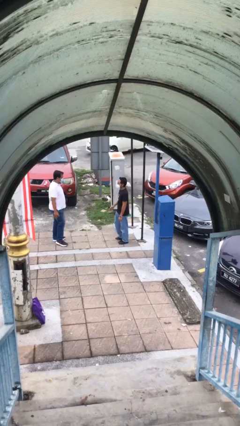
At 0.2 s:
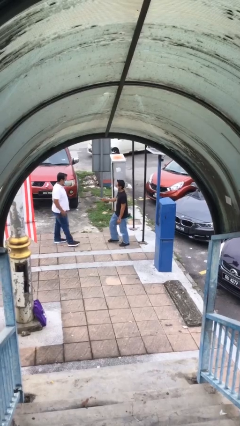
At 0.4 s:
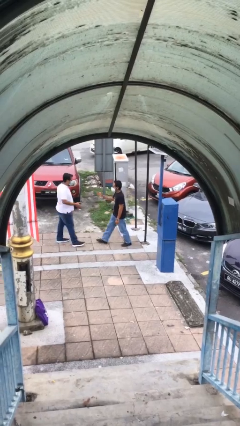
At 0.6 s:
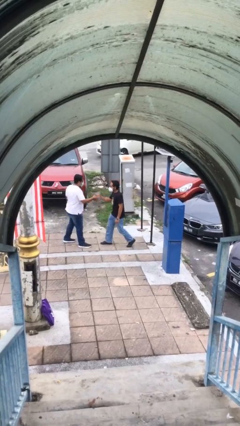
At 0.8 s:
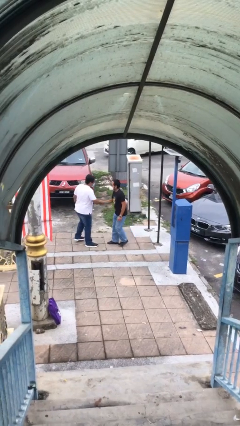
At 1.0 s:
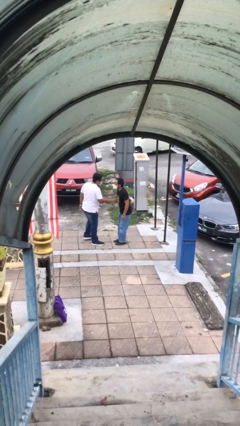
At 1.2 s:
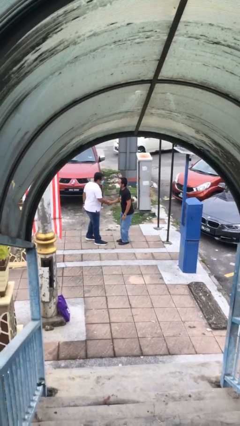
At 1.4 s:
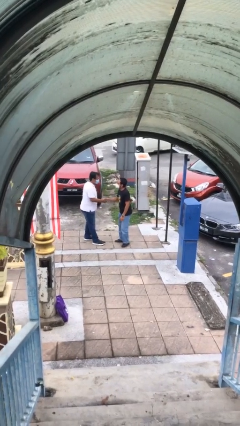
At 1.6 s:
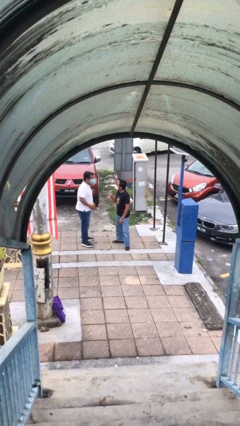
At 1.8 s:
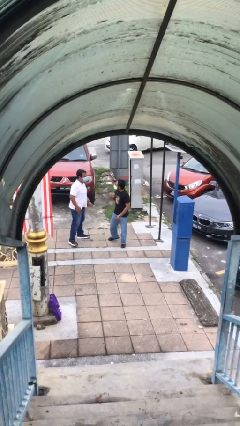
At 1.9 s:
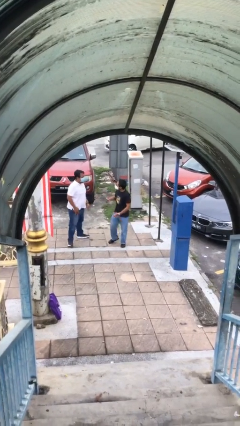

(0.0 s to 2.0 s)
person shakes hand

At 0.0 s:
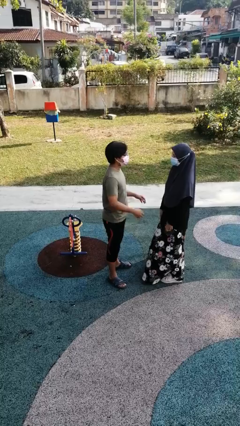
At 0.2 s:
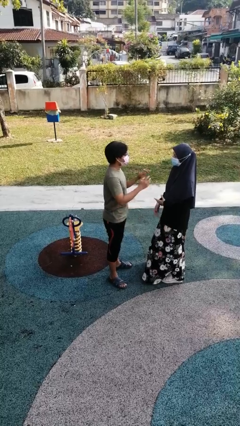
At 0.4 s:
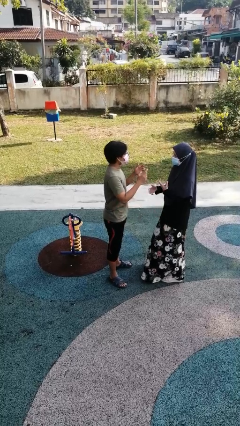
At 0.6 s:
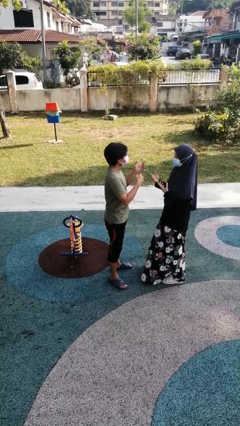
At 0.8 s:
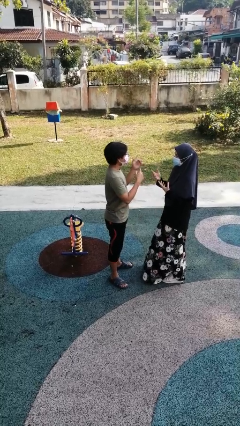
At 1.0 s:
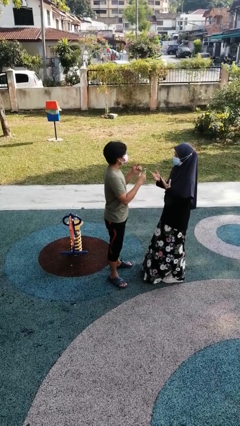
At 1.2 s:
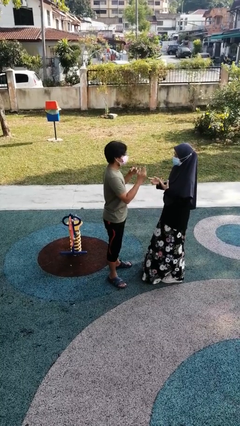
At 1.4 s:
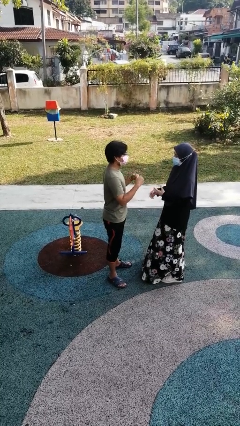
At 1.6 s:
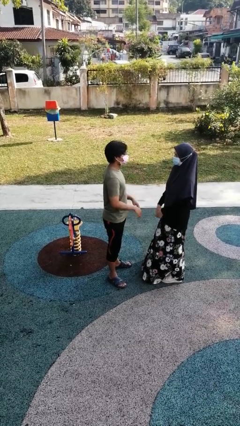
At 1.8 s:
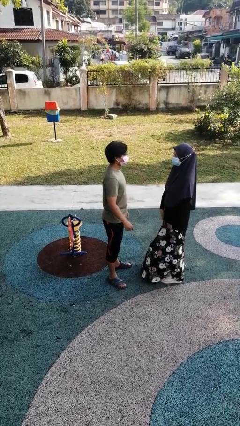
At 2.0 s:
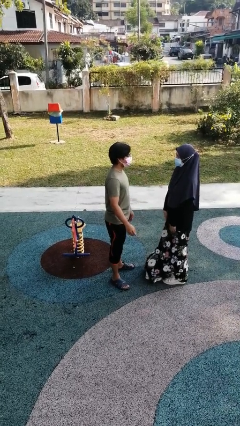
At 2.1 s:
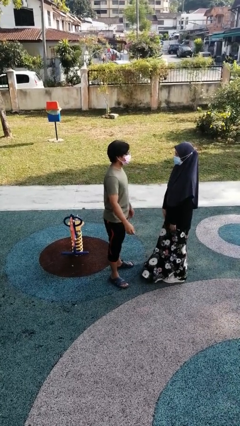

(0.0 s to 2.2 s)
person talks to person

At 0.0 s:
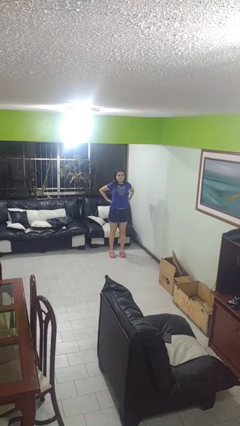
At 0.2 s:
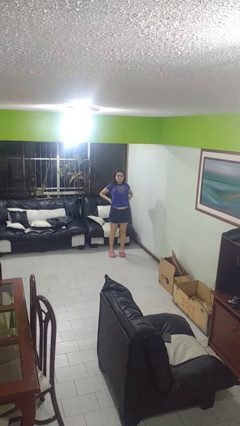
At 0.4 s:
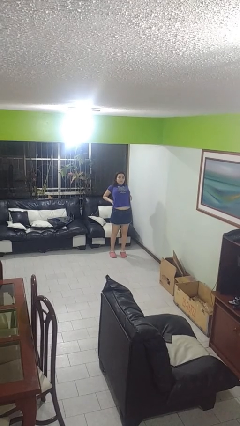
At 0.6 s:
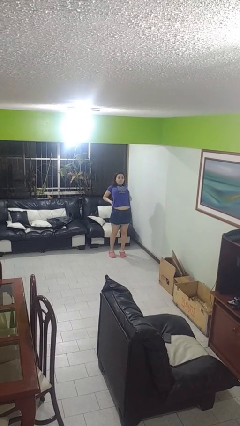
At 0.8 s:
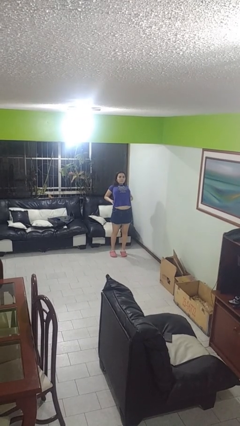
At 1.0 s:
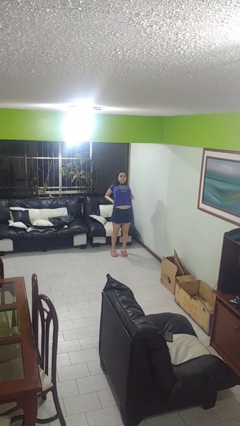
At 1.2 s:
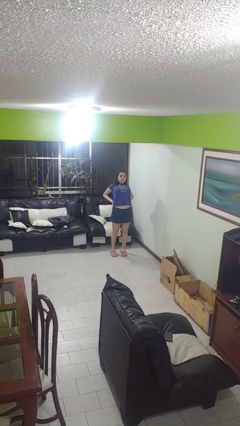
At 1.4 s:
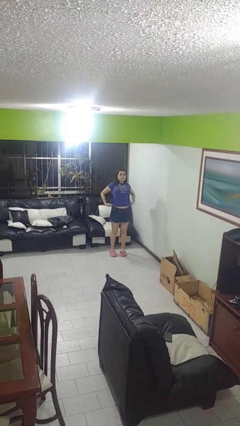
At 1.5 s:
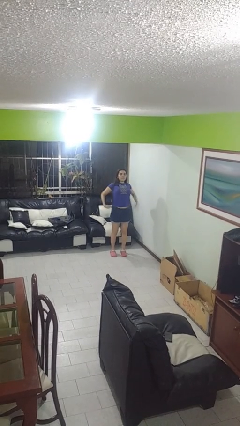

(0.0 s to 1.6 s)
person stretches back

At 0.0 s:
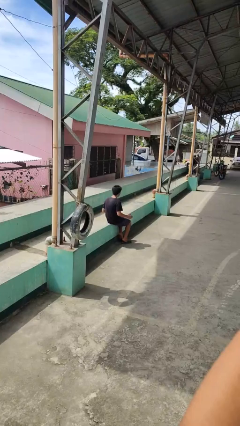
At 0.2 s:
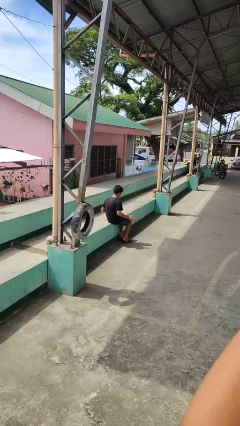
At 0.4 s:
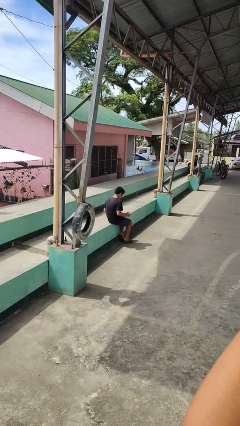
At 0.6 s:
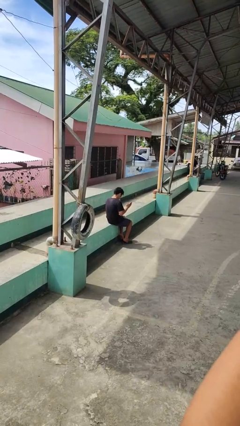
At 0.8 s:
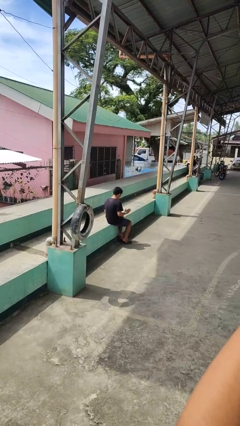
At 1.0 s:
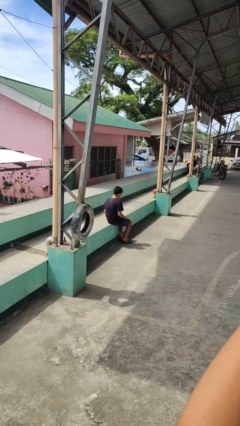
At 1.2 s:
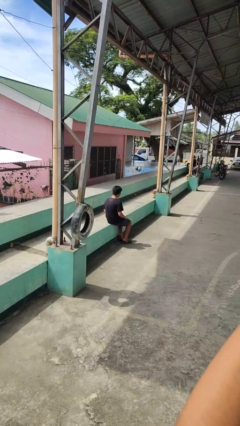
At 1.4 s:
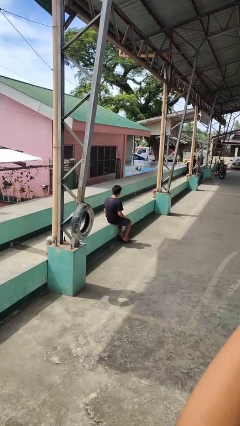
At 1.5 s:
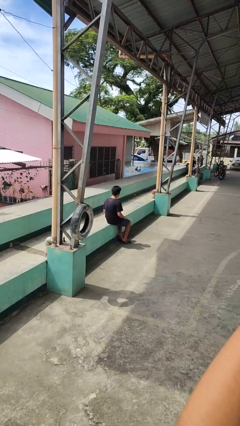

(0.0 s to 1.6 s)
person slaps hands on thighs

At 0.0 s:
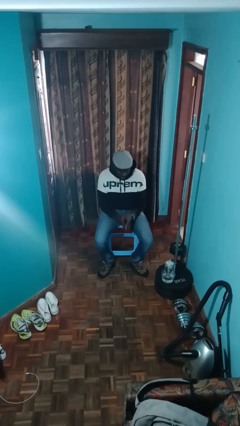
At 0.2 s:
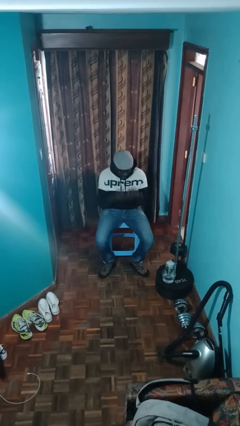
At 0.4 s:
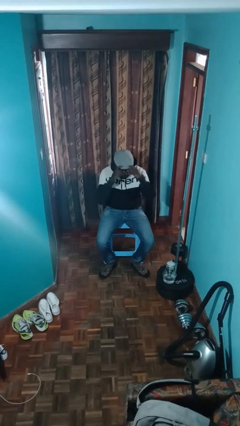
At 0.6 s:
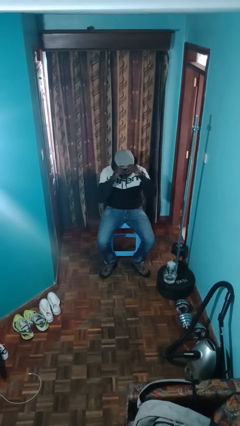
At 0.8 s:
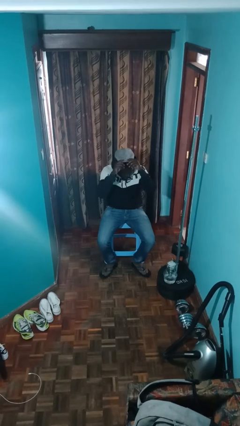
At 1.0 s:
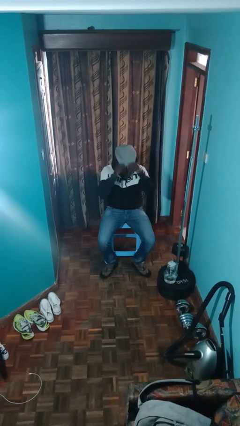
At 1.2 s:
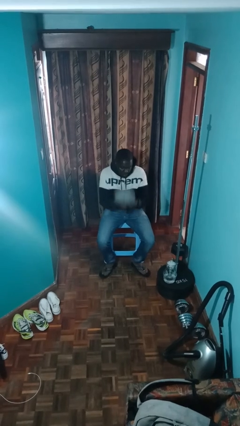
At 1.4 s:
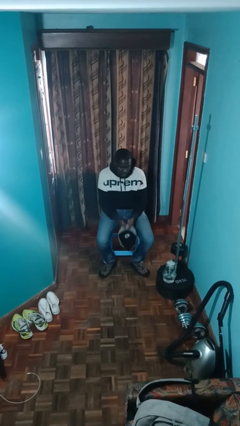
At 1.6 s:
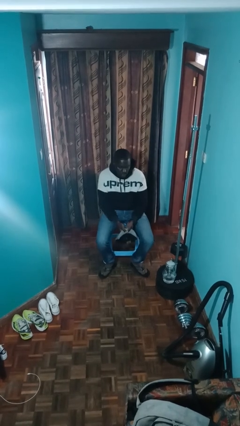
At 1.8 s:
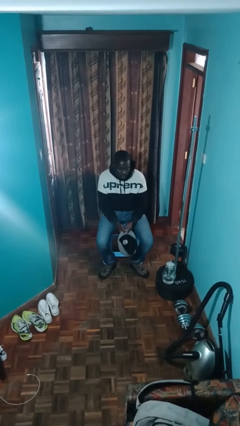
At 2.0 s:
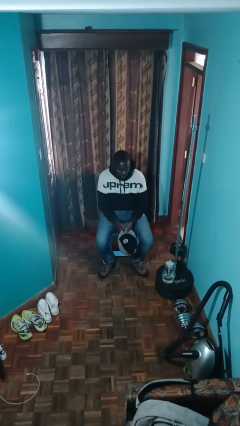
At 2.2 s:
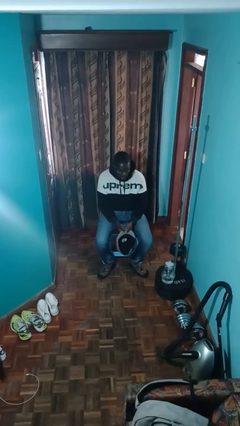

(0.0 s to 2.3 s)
person takes off hat

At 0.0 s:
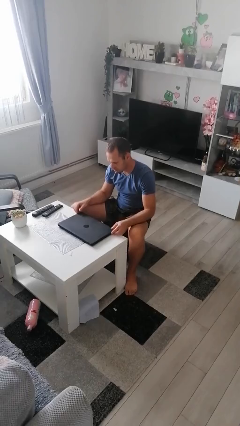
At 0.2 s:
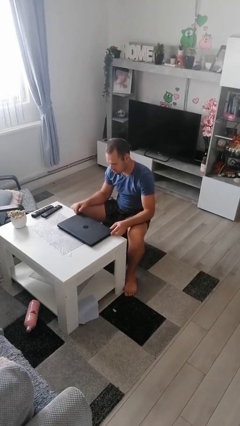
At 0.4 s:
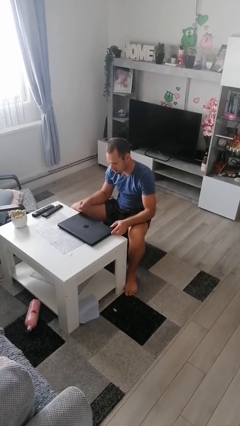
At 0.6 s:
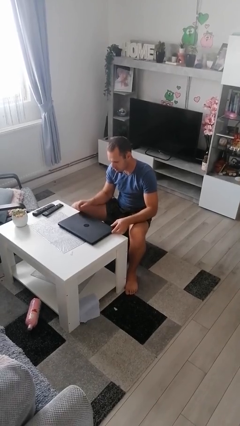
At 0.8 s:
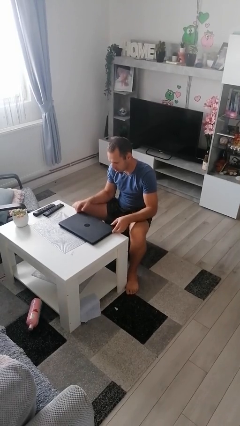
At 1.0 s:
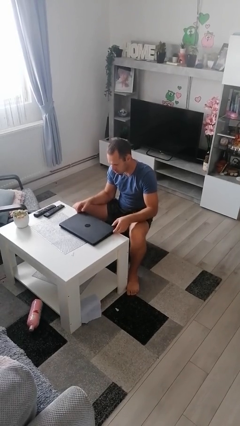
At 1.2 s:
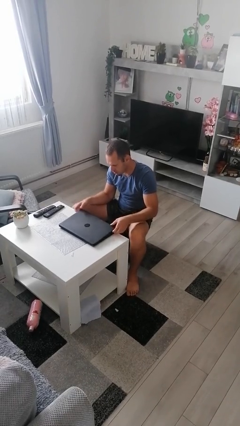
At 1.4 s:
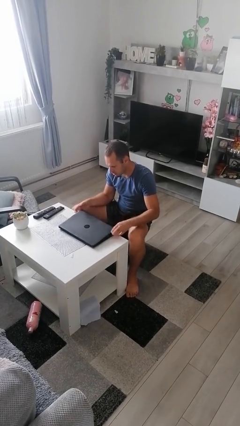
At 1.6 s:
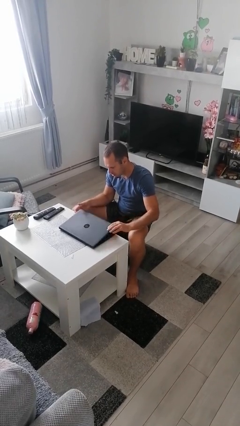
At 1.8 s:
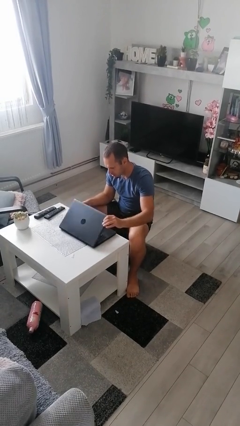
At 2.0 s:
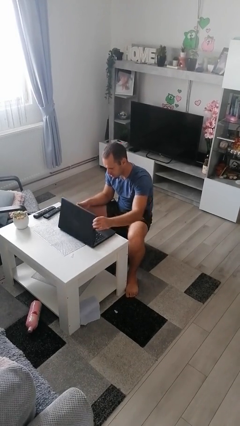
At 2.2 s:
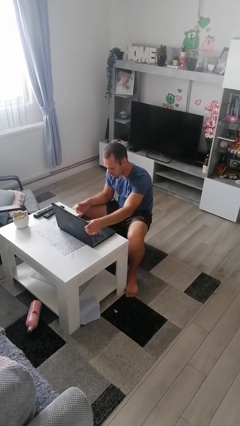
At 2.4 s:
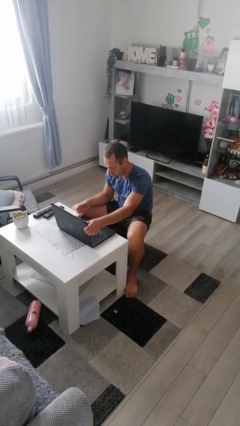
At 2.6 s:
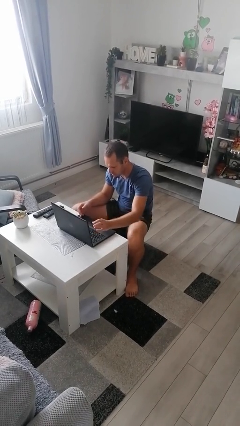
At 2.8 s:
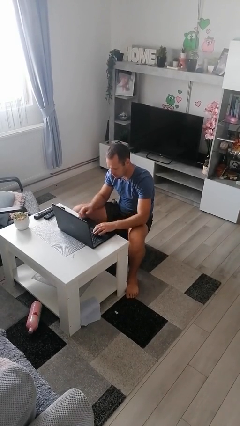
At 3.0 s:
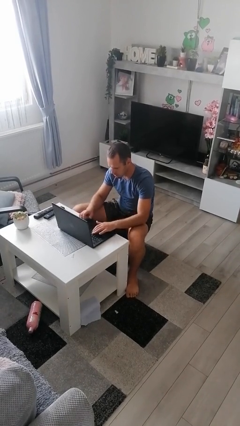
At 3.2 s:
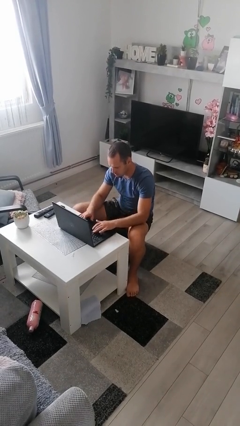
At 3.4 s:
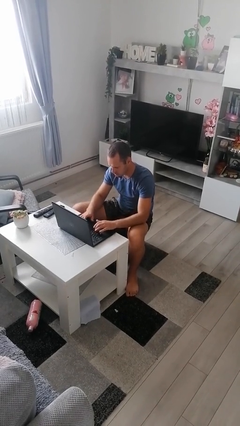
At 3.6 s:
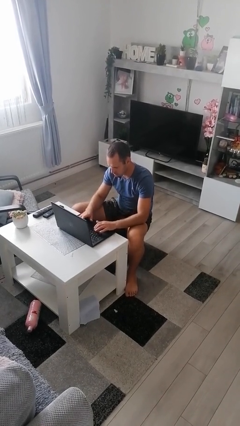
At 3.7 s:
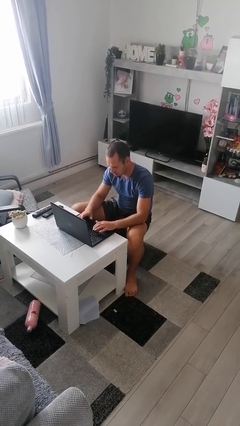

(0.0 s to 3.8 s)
person opens laptop

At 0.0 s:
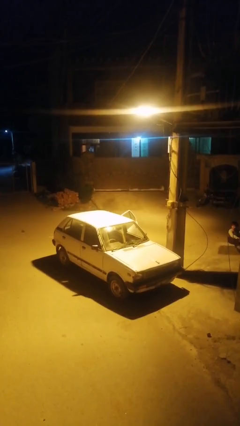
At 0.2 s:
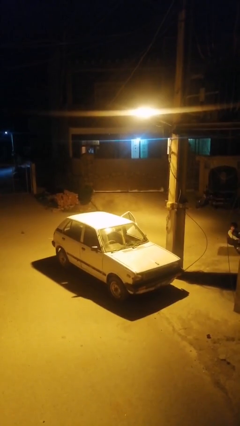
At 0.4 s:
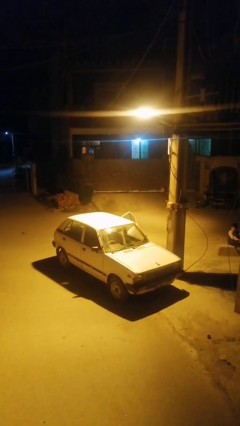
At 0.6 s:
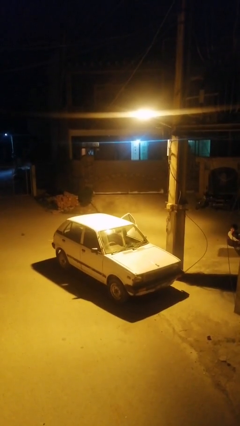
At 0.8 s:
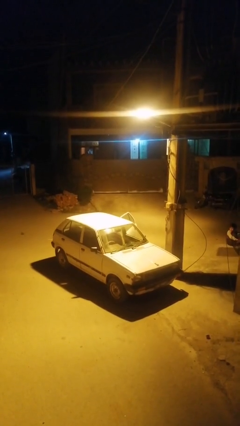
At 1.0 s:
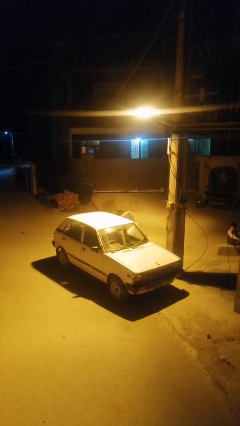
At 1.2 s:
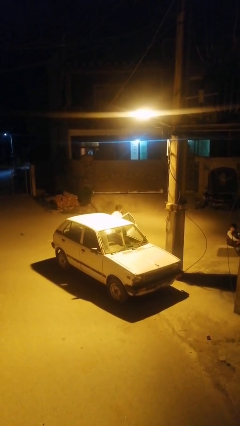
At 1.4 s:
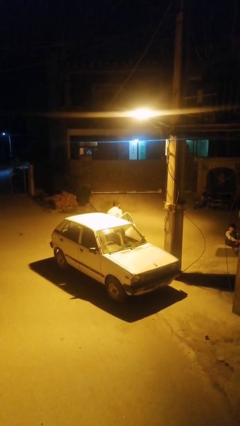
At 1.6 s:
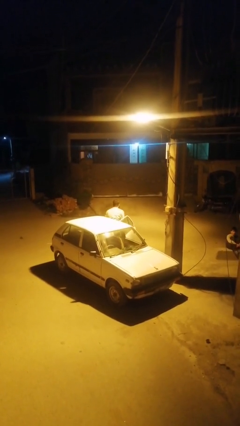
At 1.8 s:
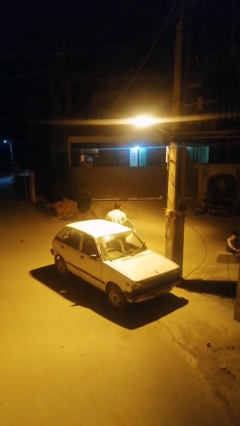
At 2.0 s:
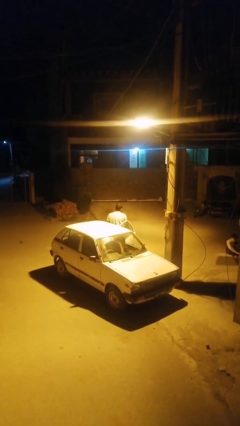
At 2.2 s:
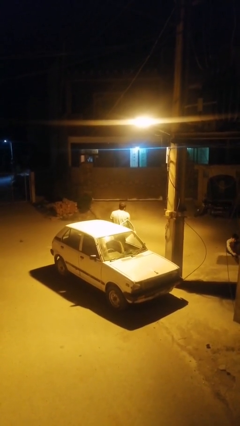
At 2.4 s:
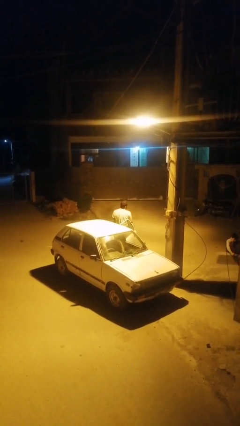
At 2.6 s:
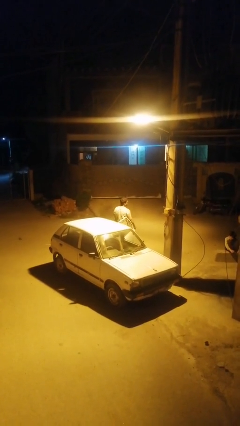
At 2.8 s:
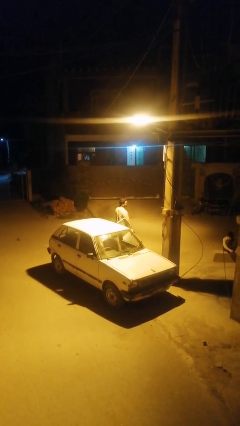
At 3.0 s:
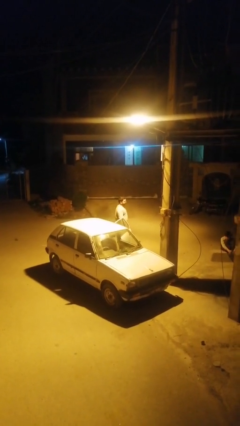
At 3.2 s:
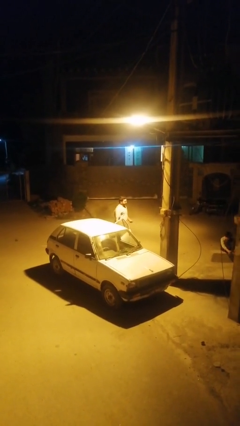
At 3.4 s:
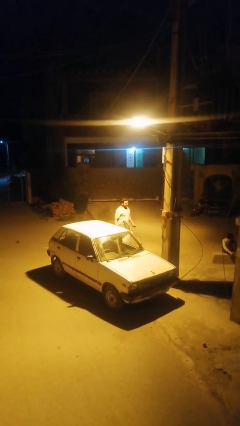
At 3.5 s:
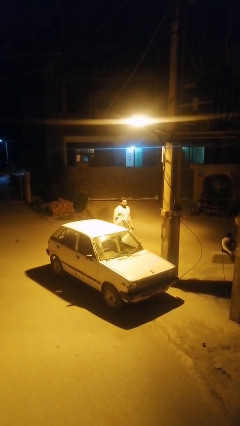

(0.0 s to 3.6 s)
person exits car
